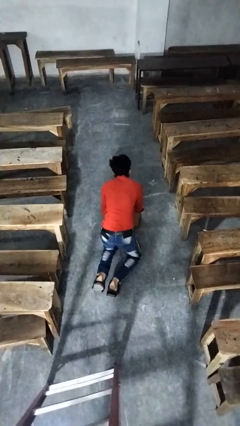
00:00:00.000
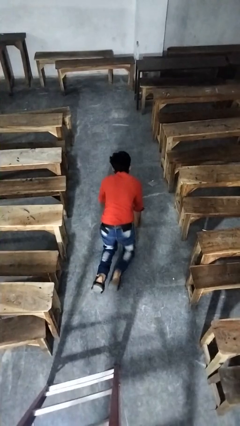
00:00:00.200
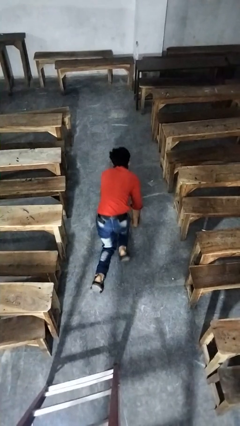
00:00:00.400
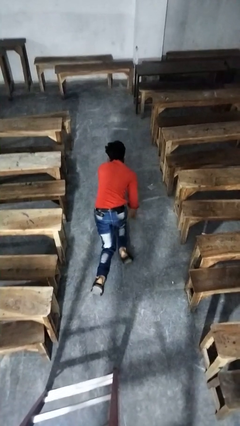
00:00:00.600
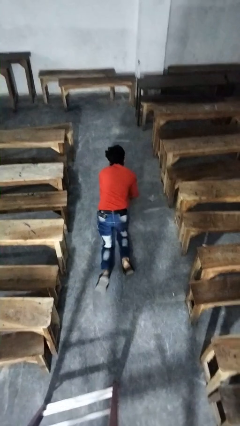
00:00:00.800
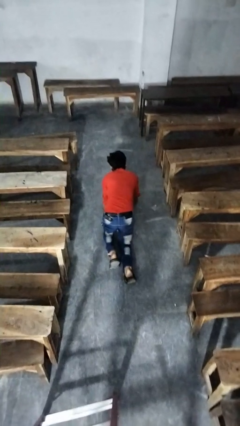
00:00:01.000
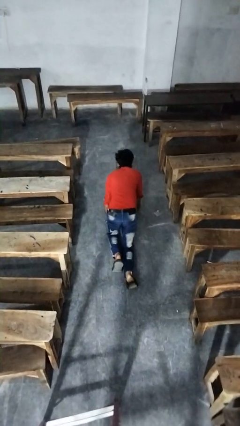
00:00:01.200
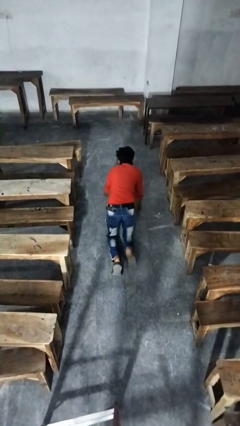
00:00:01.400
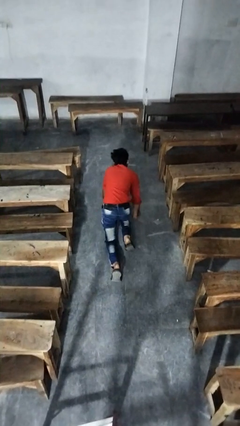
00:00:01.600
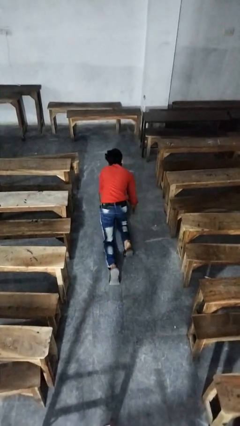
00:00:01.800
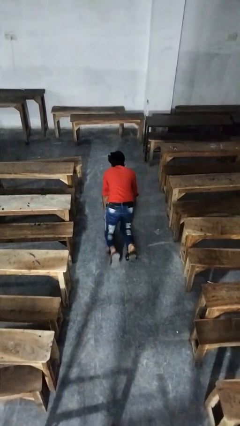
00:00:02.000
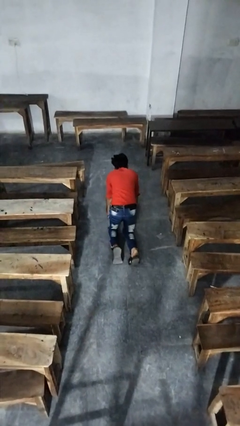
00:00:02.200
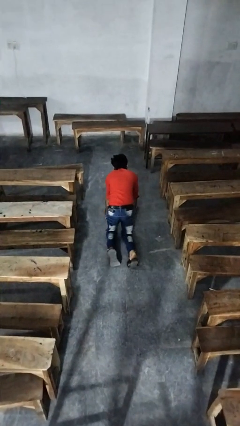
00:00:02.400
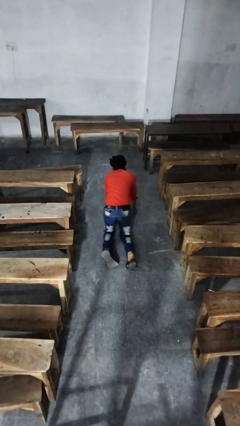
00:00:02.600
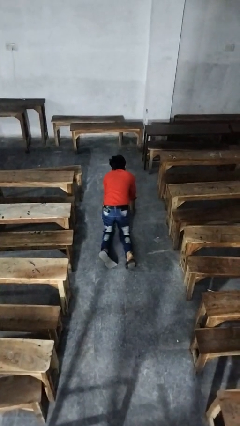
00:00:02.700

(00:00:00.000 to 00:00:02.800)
person crawls

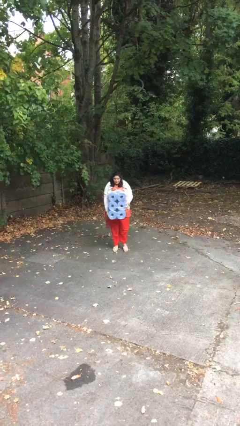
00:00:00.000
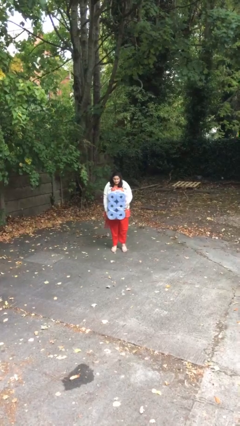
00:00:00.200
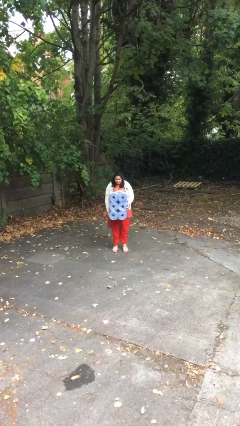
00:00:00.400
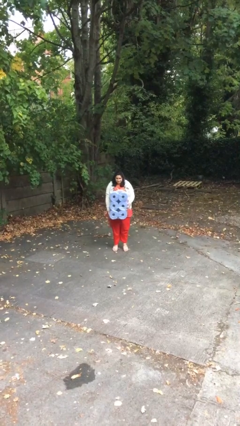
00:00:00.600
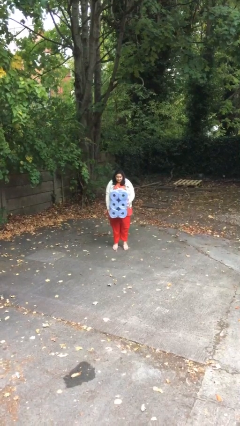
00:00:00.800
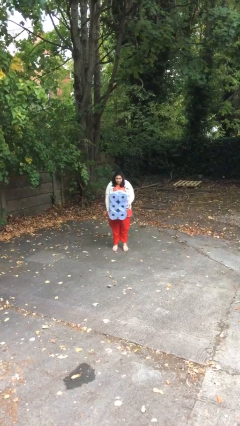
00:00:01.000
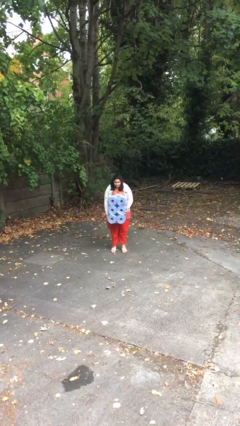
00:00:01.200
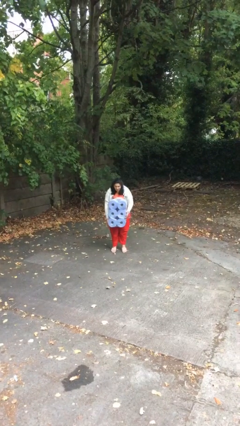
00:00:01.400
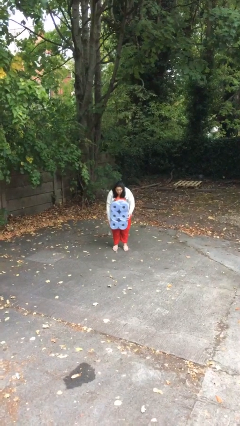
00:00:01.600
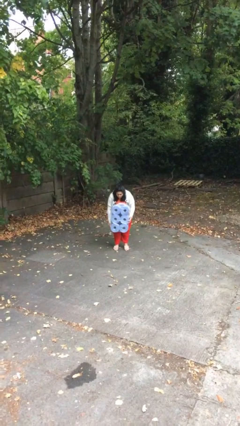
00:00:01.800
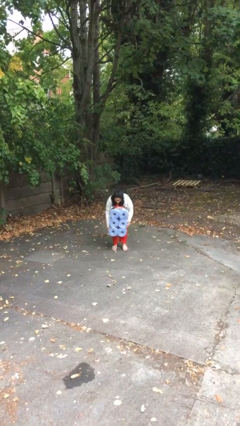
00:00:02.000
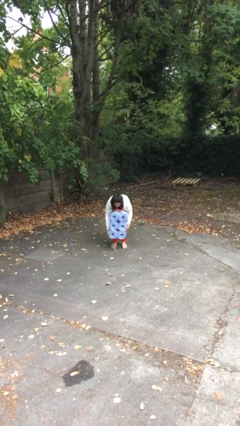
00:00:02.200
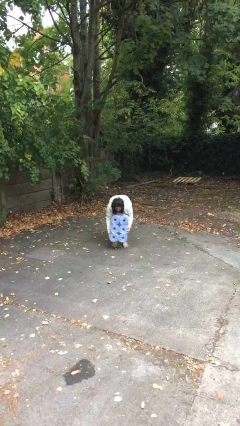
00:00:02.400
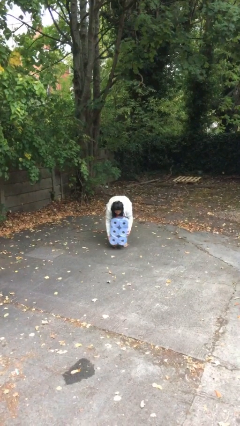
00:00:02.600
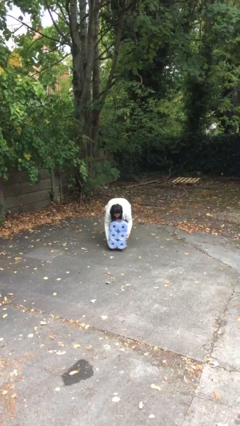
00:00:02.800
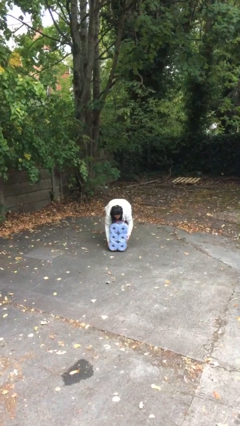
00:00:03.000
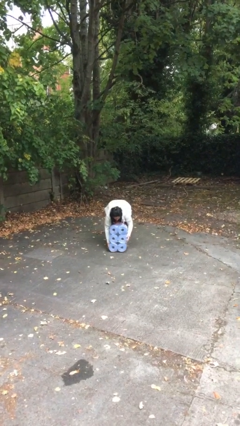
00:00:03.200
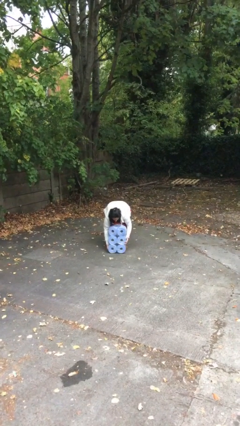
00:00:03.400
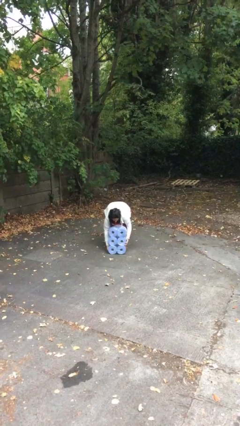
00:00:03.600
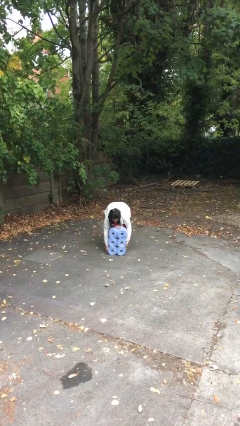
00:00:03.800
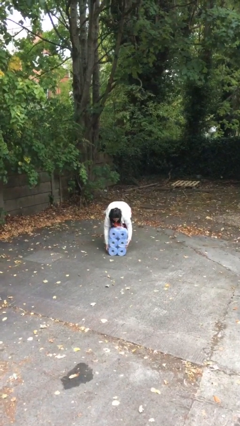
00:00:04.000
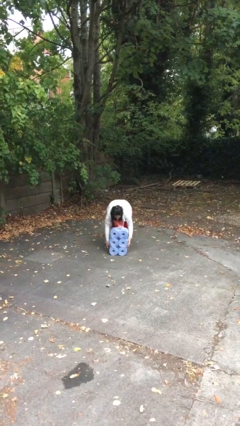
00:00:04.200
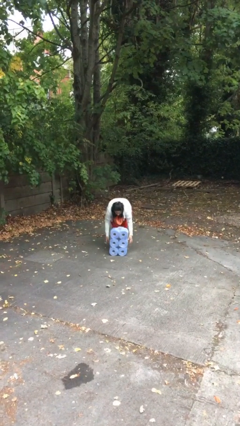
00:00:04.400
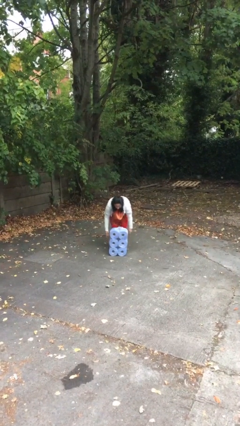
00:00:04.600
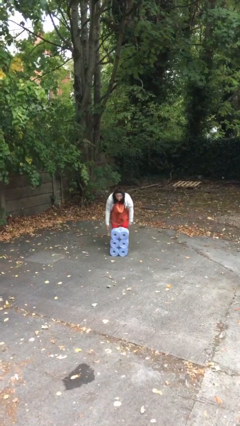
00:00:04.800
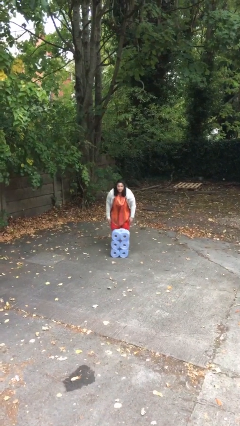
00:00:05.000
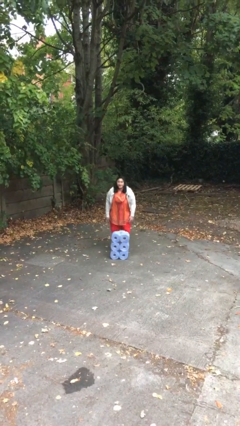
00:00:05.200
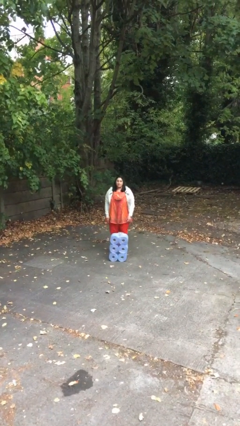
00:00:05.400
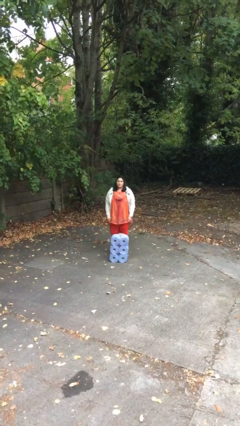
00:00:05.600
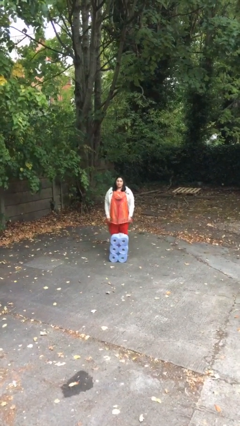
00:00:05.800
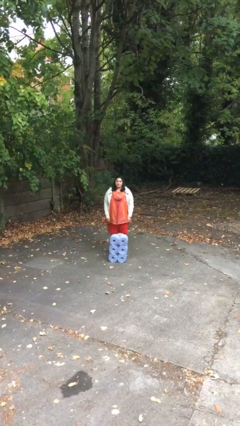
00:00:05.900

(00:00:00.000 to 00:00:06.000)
person puts down object on floor

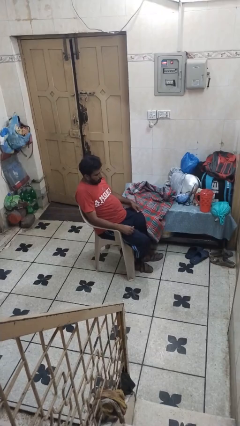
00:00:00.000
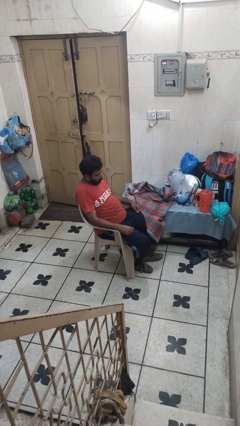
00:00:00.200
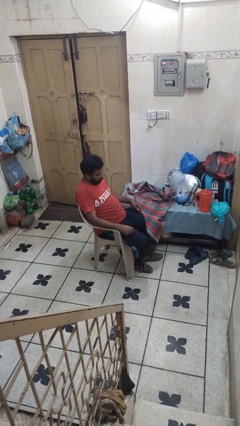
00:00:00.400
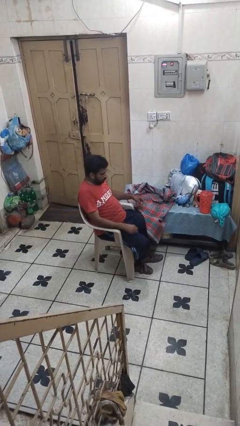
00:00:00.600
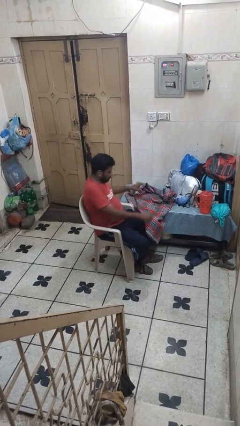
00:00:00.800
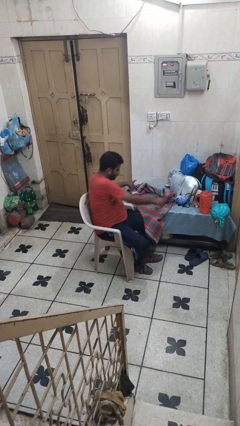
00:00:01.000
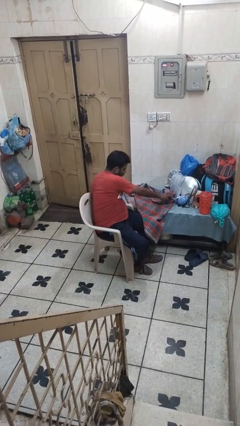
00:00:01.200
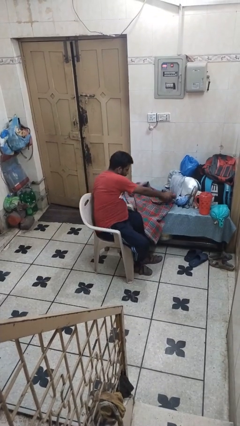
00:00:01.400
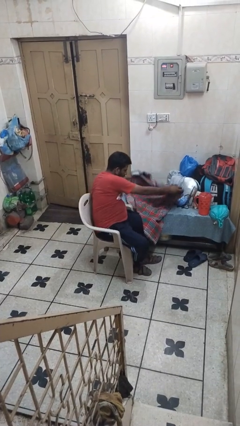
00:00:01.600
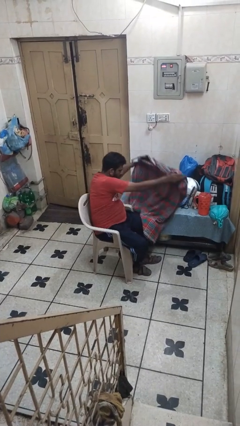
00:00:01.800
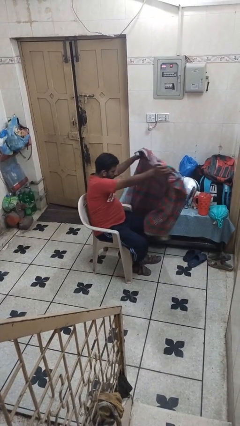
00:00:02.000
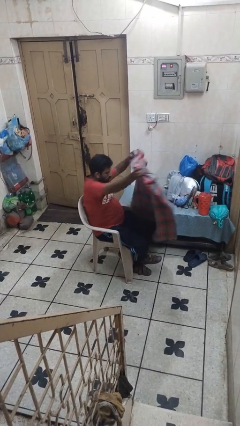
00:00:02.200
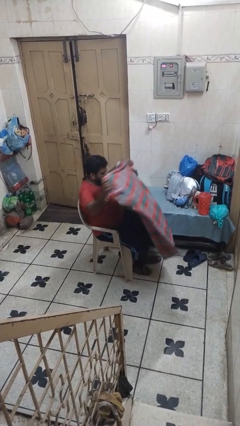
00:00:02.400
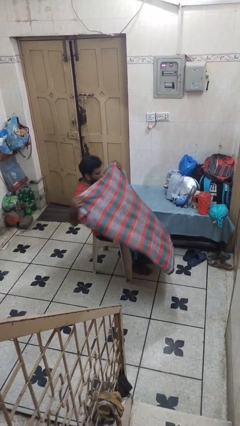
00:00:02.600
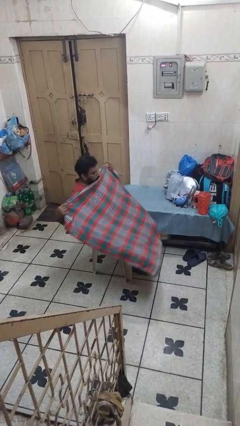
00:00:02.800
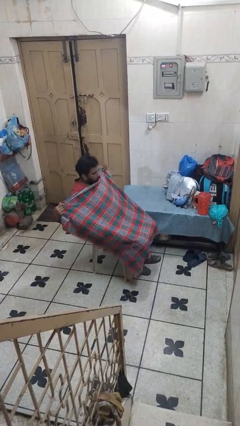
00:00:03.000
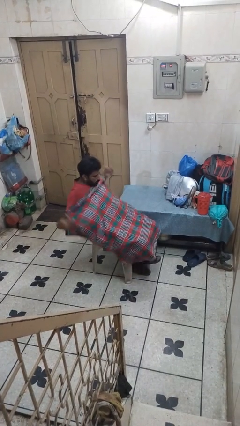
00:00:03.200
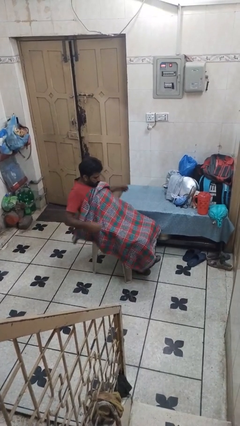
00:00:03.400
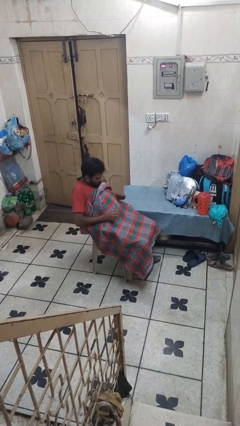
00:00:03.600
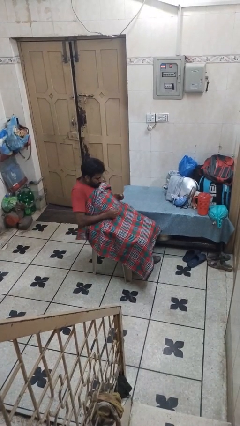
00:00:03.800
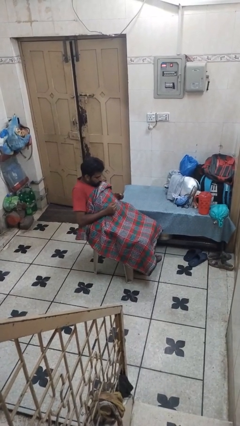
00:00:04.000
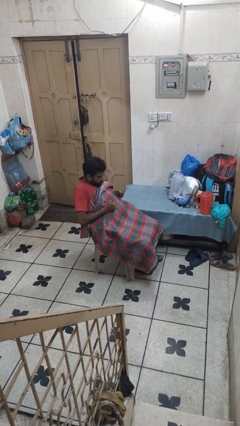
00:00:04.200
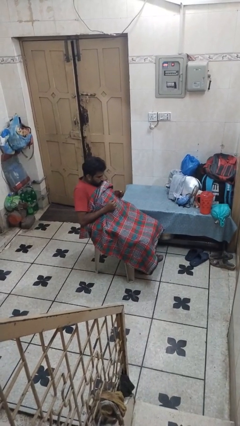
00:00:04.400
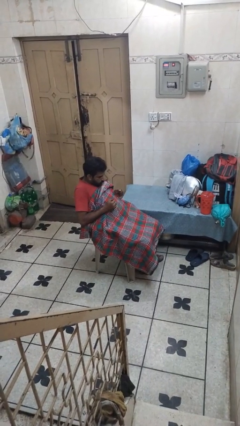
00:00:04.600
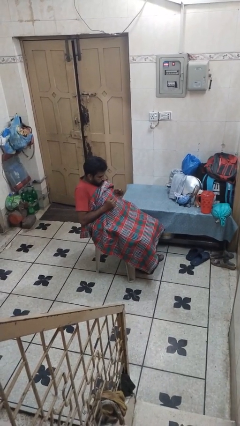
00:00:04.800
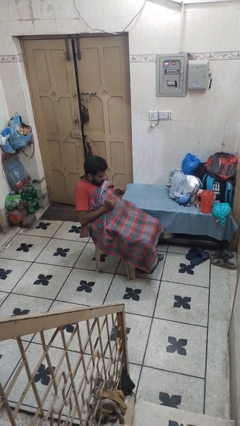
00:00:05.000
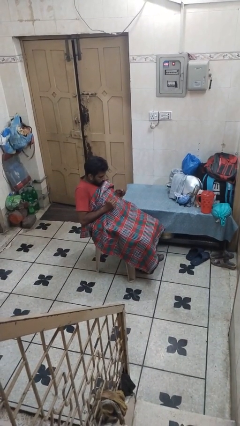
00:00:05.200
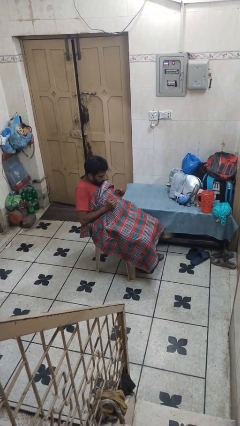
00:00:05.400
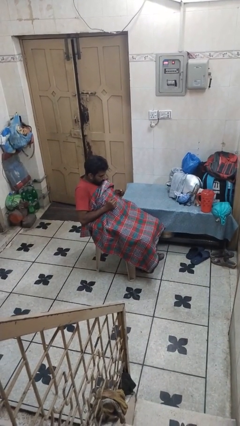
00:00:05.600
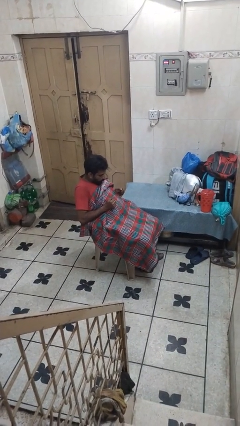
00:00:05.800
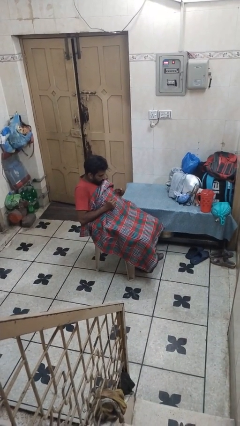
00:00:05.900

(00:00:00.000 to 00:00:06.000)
person covers with blanket

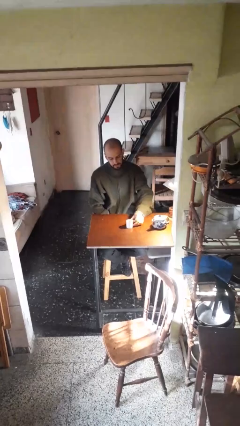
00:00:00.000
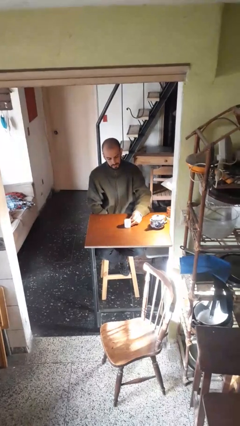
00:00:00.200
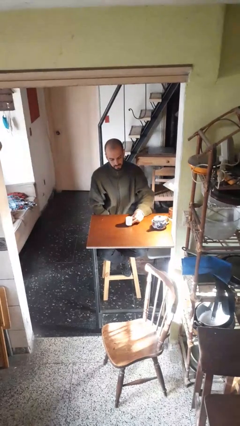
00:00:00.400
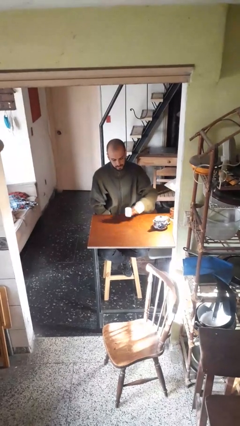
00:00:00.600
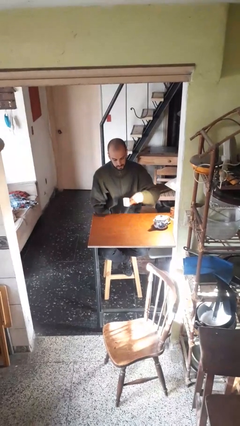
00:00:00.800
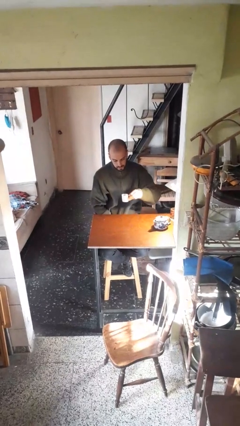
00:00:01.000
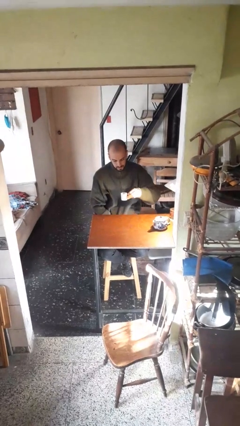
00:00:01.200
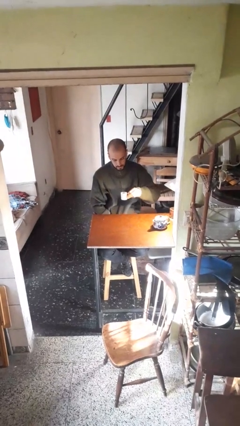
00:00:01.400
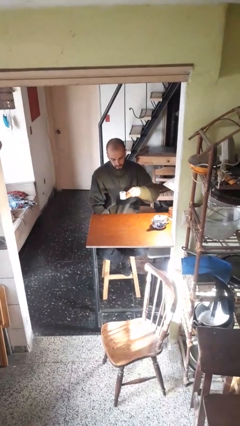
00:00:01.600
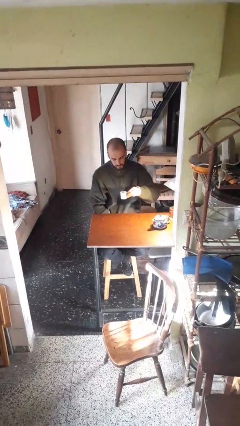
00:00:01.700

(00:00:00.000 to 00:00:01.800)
person picks up object from table

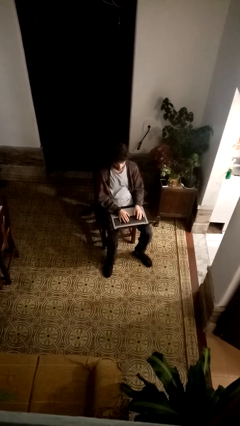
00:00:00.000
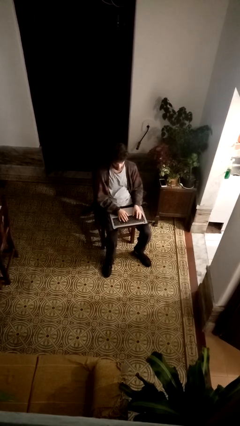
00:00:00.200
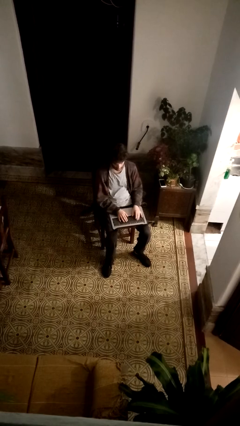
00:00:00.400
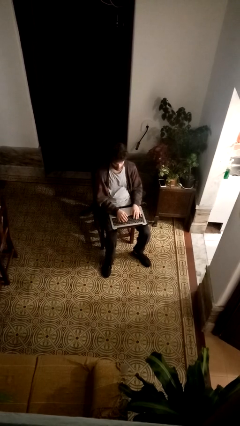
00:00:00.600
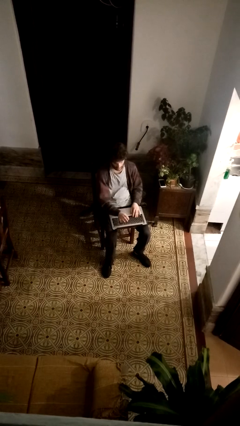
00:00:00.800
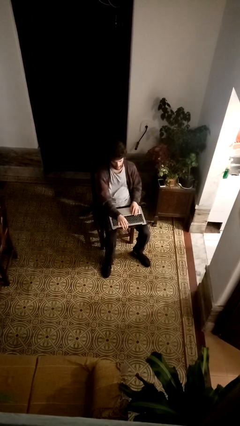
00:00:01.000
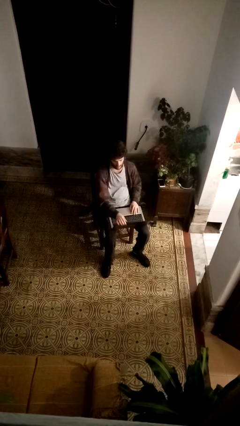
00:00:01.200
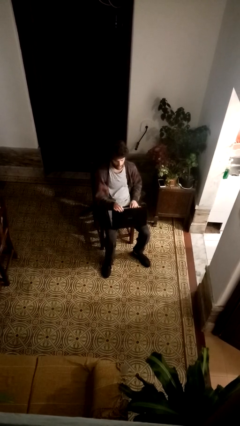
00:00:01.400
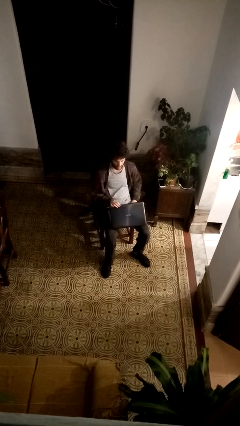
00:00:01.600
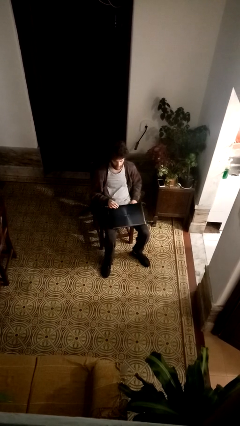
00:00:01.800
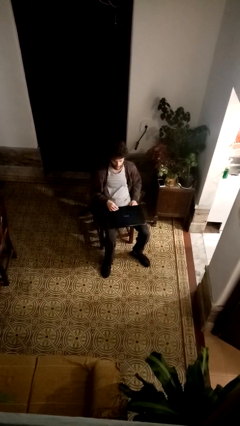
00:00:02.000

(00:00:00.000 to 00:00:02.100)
person closes laptop
